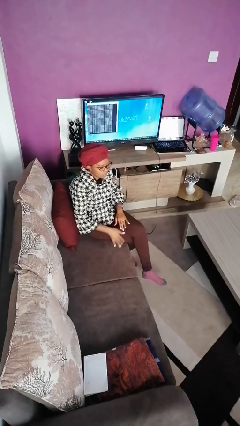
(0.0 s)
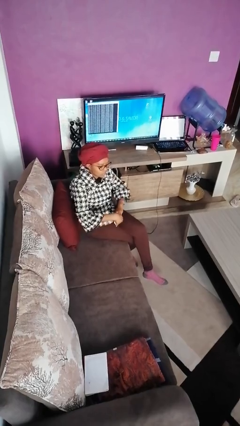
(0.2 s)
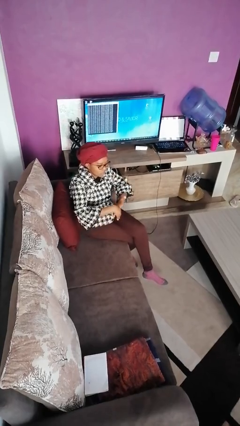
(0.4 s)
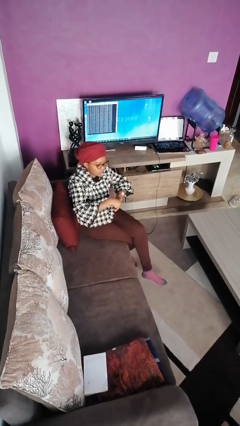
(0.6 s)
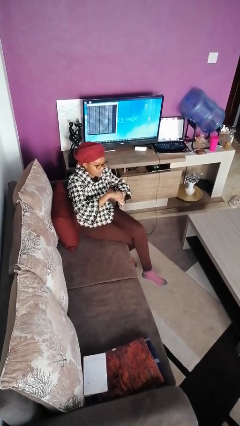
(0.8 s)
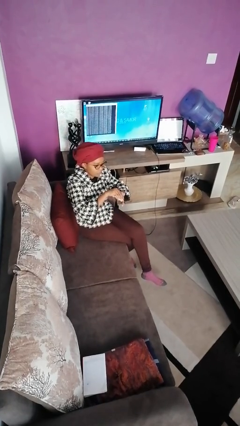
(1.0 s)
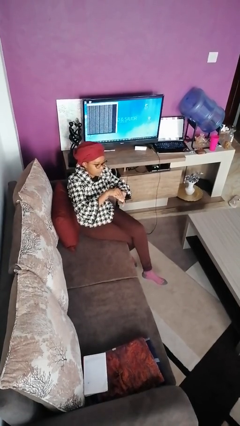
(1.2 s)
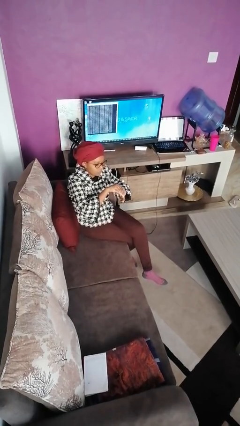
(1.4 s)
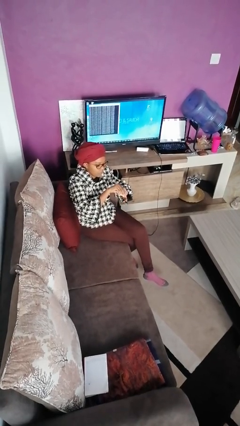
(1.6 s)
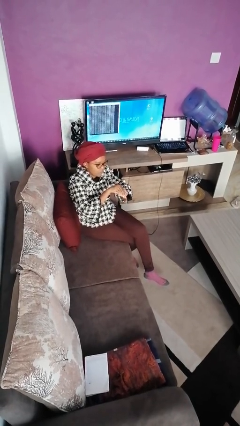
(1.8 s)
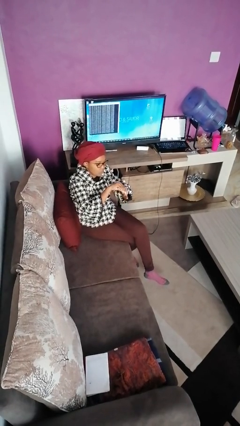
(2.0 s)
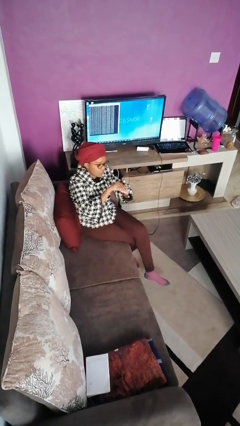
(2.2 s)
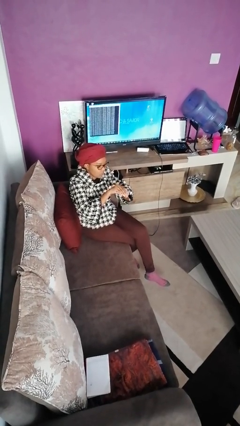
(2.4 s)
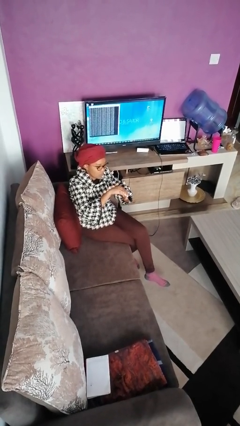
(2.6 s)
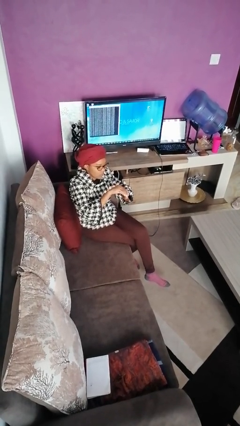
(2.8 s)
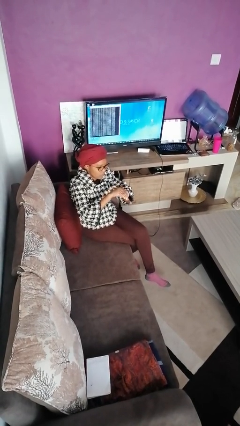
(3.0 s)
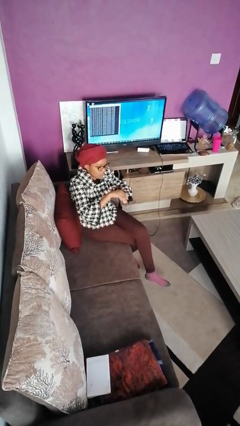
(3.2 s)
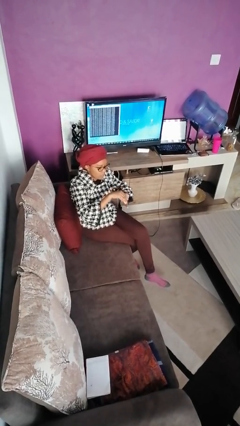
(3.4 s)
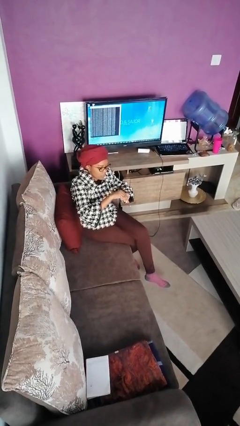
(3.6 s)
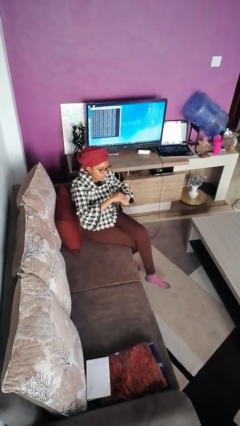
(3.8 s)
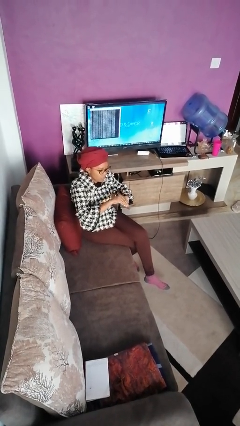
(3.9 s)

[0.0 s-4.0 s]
person cracks knuckles

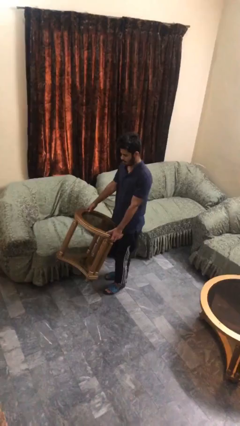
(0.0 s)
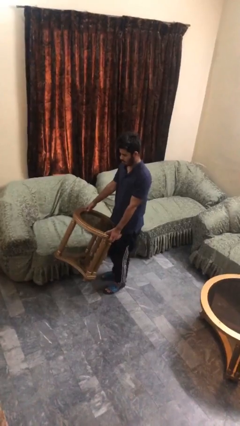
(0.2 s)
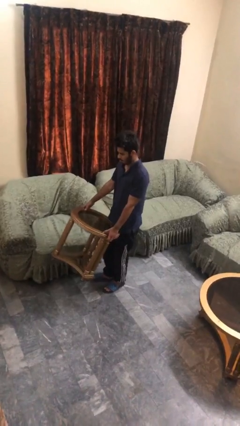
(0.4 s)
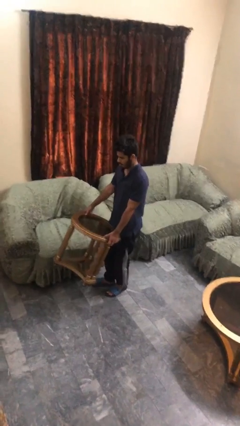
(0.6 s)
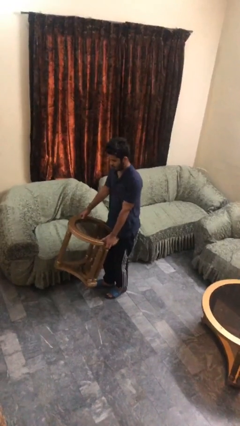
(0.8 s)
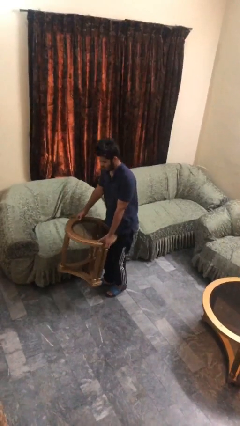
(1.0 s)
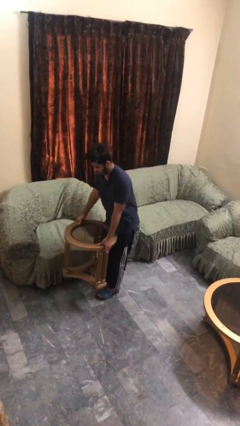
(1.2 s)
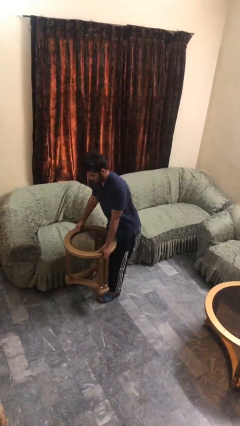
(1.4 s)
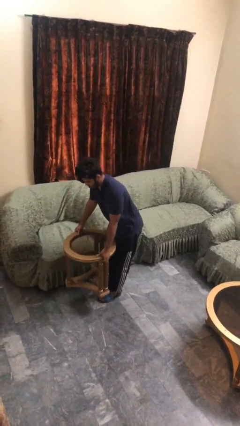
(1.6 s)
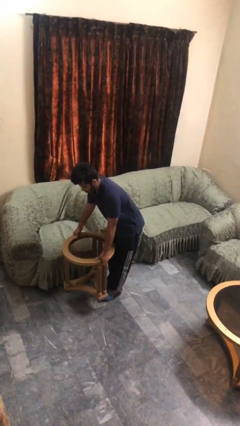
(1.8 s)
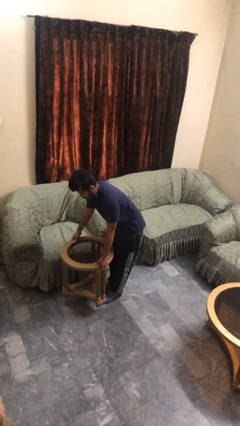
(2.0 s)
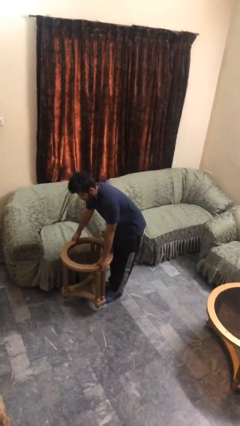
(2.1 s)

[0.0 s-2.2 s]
person puts down object on floor

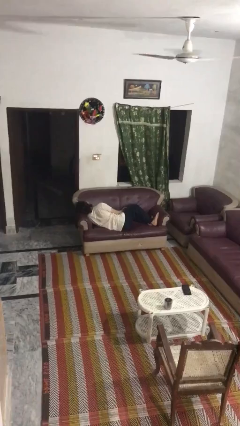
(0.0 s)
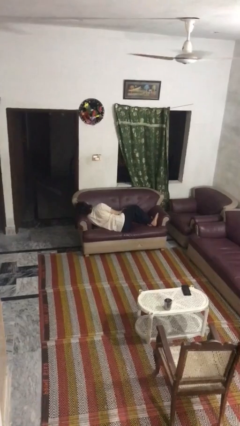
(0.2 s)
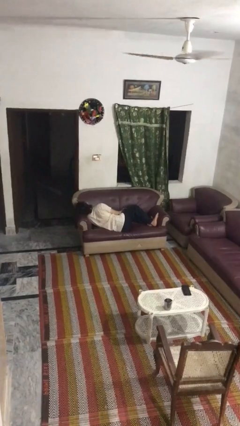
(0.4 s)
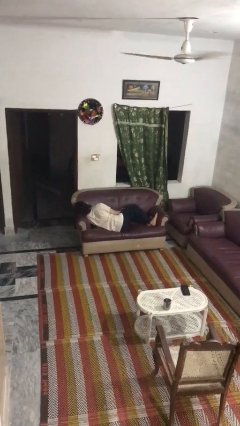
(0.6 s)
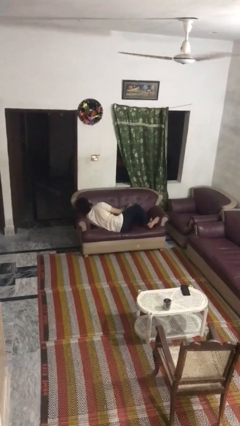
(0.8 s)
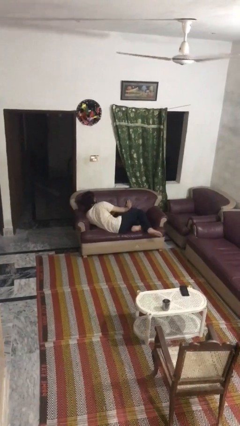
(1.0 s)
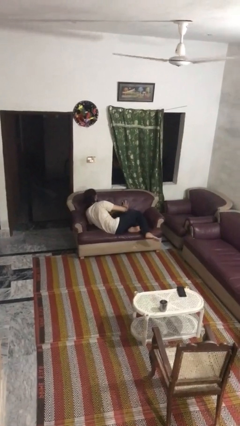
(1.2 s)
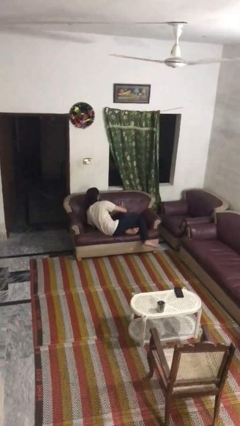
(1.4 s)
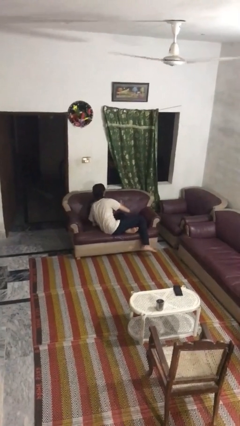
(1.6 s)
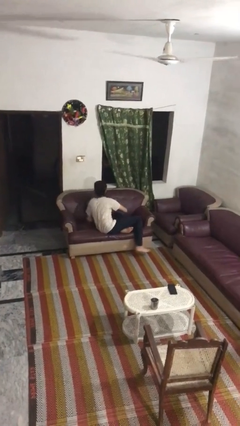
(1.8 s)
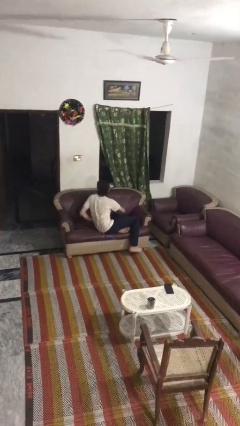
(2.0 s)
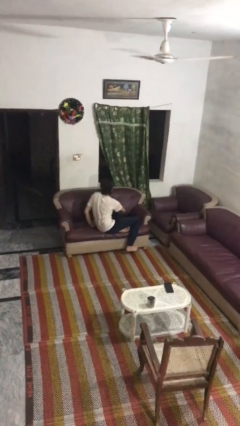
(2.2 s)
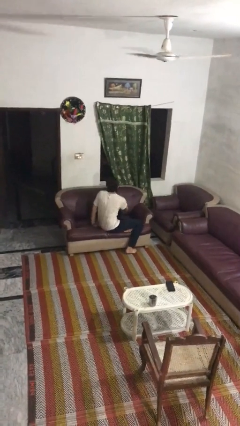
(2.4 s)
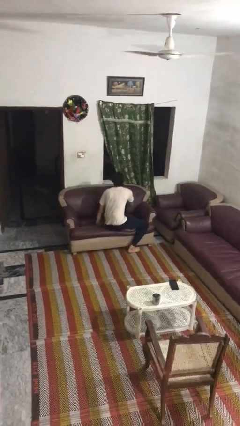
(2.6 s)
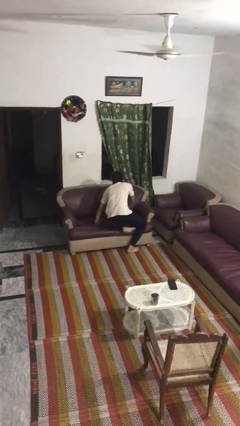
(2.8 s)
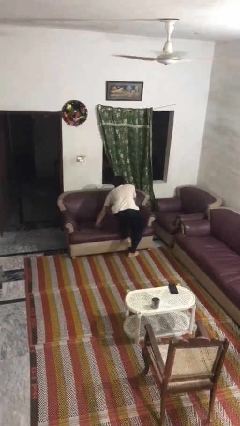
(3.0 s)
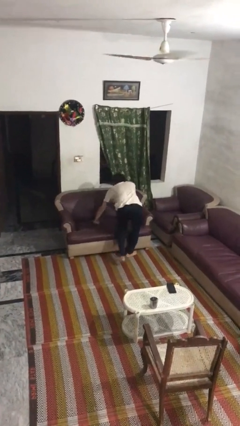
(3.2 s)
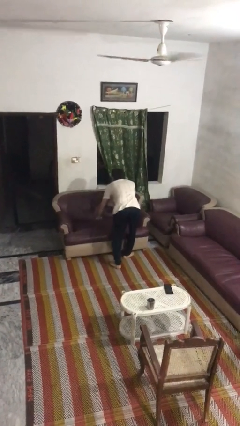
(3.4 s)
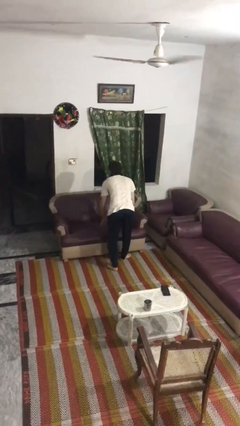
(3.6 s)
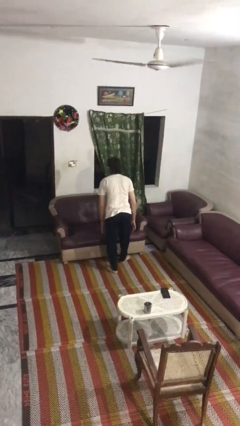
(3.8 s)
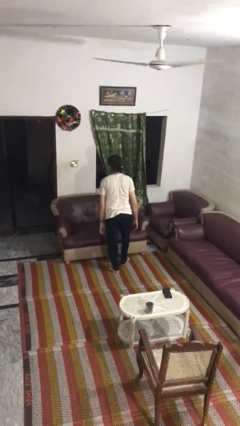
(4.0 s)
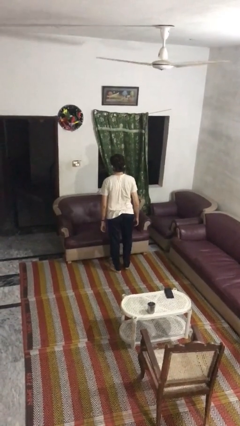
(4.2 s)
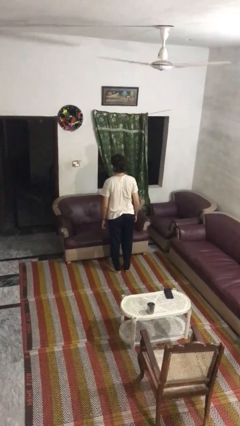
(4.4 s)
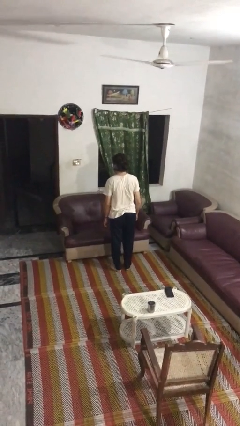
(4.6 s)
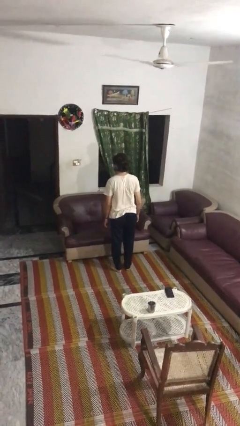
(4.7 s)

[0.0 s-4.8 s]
person stands up

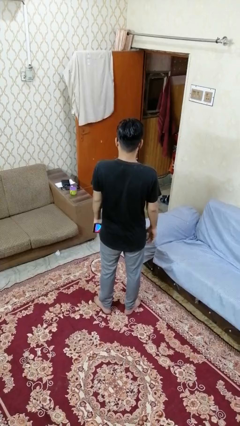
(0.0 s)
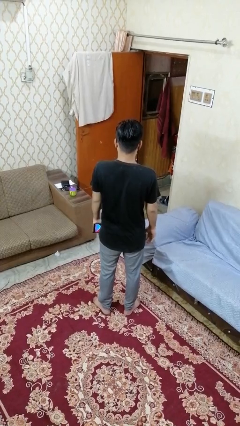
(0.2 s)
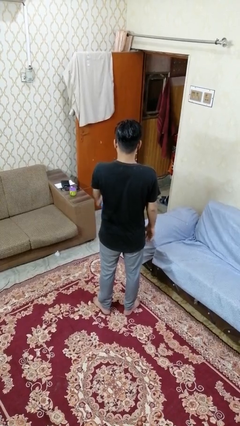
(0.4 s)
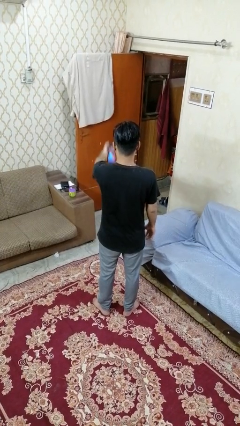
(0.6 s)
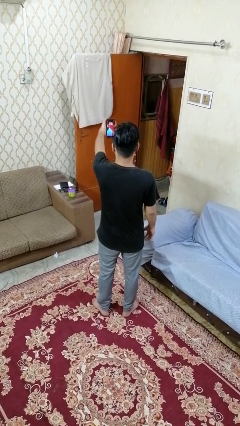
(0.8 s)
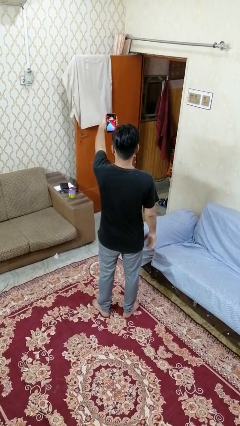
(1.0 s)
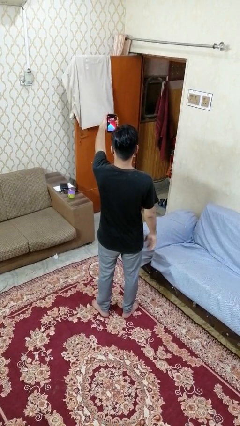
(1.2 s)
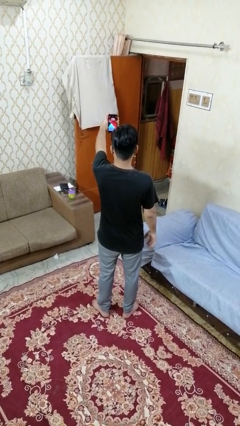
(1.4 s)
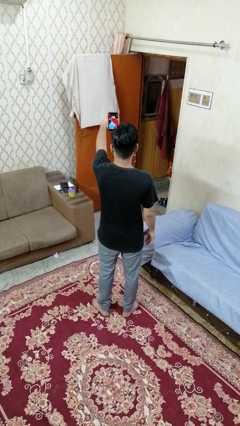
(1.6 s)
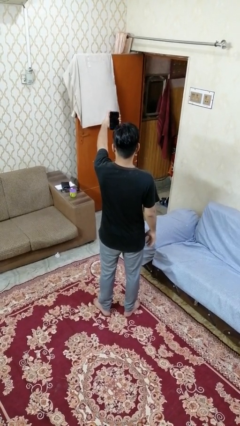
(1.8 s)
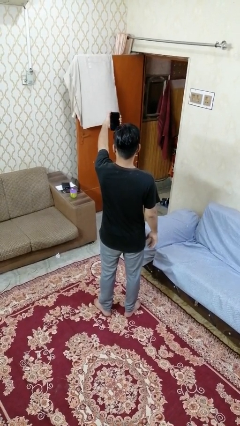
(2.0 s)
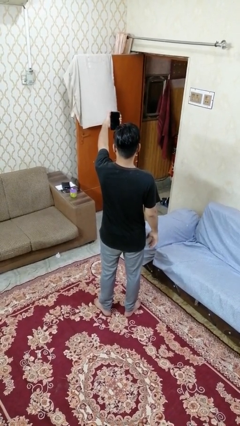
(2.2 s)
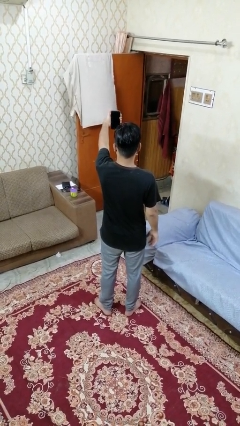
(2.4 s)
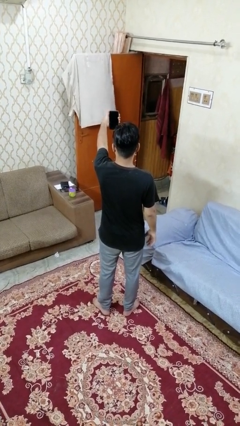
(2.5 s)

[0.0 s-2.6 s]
person takes selfie

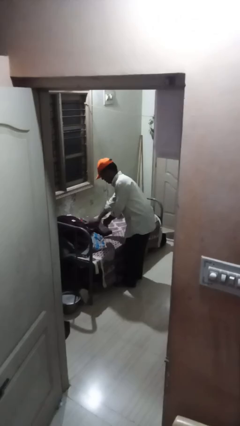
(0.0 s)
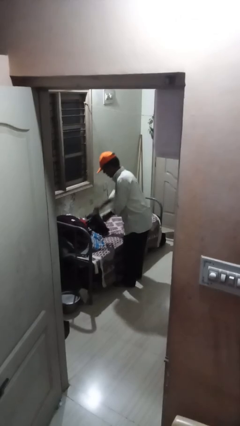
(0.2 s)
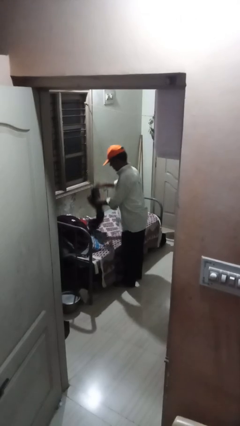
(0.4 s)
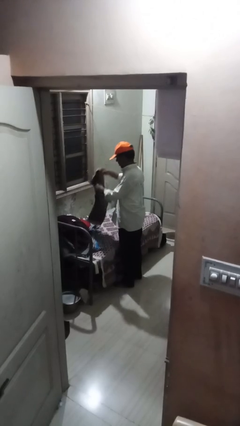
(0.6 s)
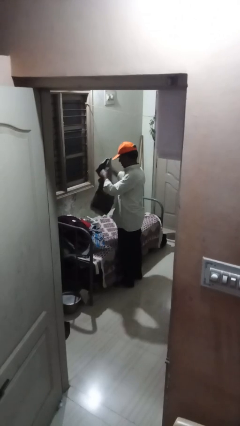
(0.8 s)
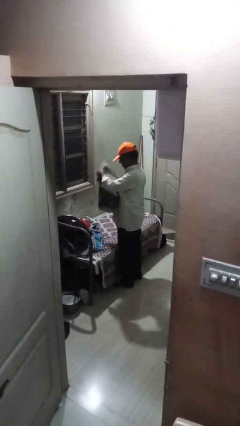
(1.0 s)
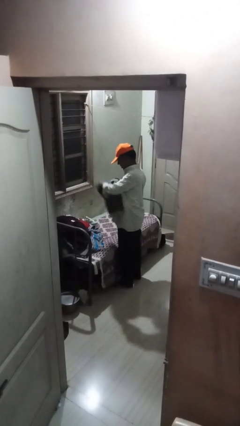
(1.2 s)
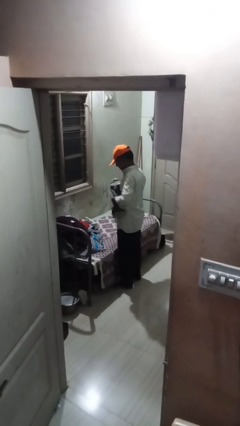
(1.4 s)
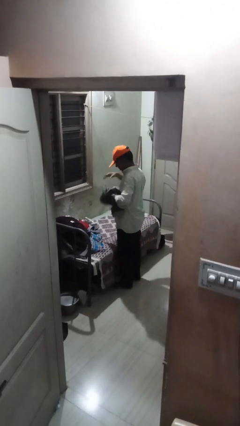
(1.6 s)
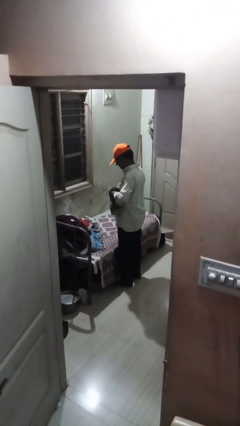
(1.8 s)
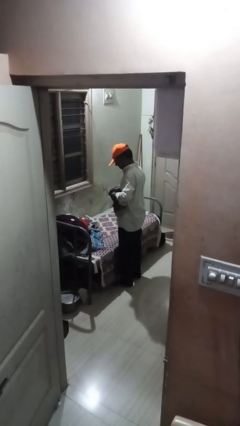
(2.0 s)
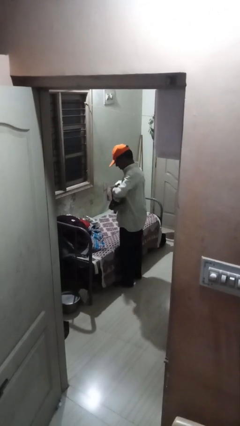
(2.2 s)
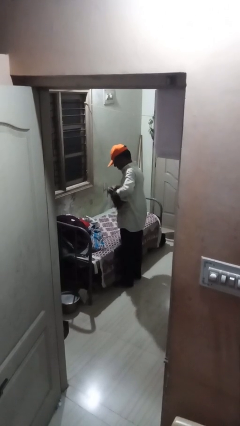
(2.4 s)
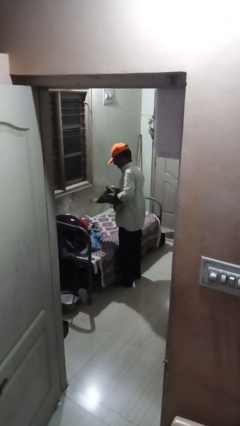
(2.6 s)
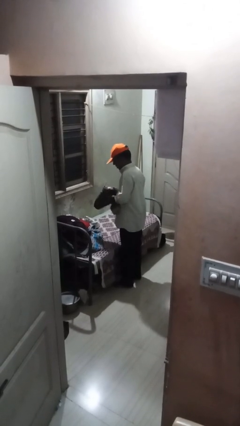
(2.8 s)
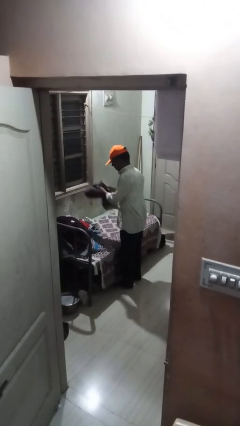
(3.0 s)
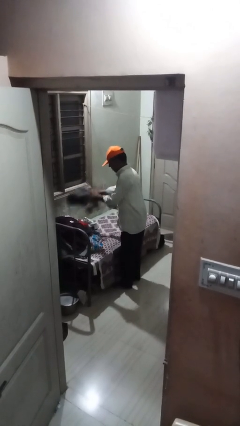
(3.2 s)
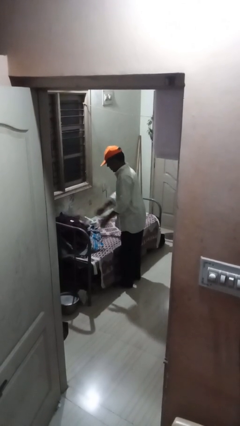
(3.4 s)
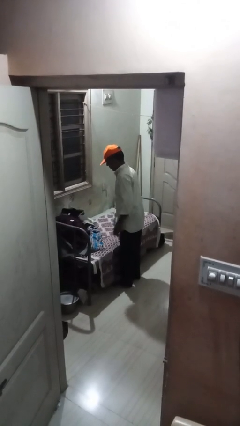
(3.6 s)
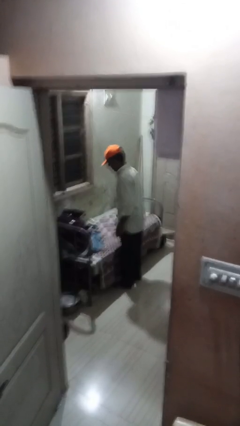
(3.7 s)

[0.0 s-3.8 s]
person folds pants

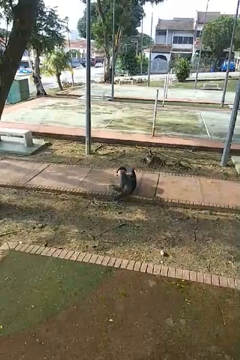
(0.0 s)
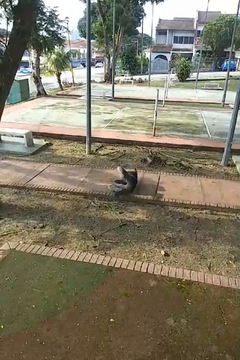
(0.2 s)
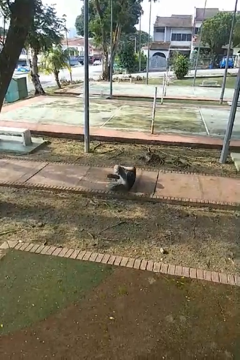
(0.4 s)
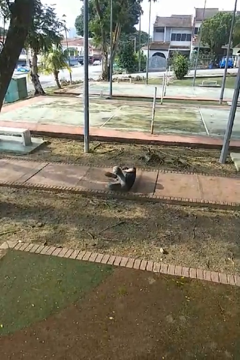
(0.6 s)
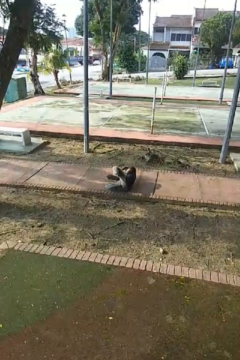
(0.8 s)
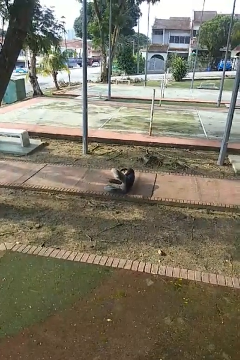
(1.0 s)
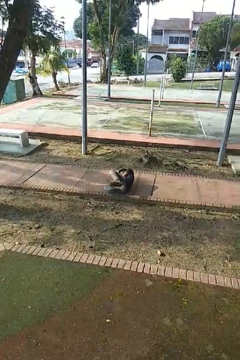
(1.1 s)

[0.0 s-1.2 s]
person lies down on floor
